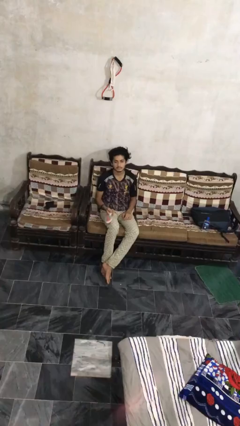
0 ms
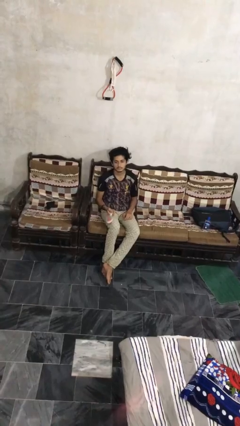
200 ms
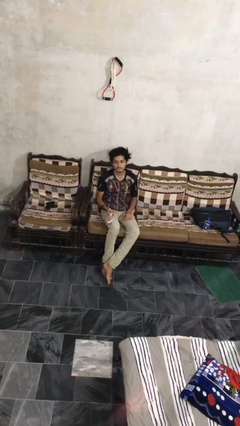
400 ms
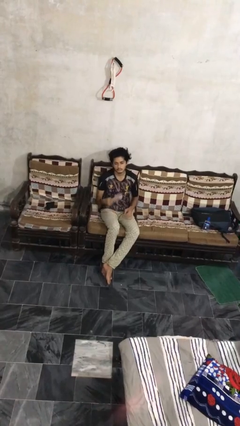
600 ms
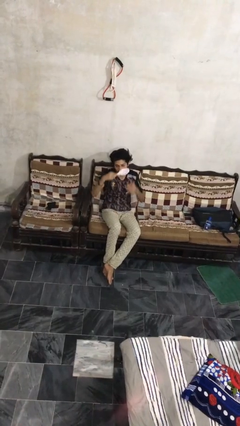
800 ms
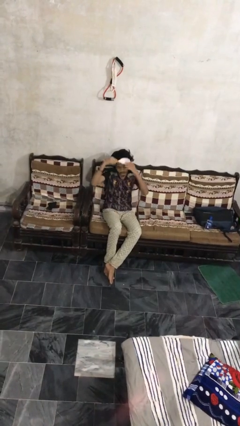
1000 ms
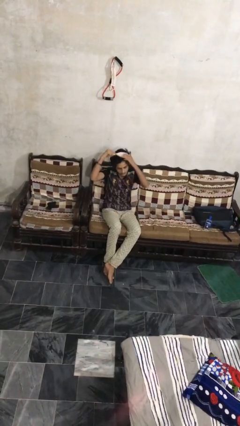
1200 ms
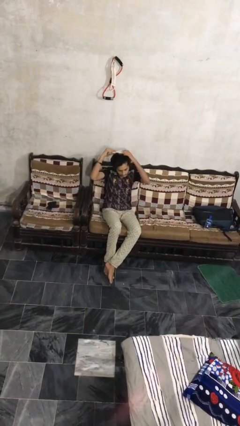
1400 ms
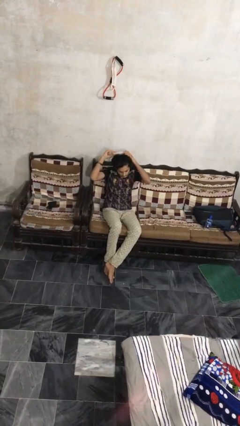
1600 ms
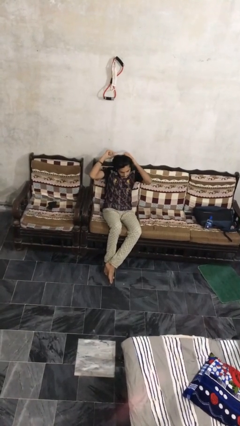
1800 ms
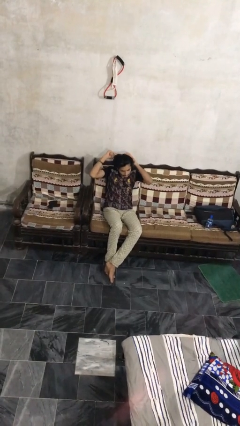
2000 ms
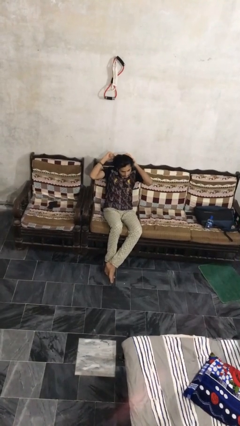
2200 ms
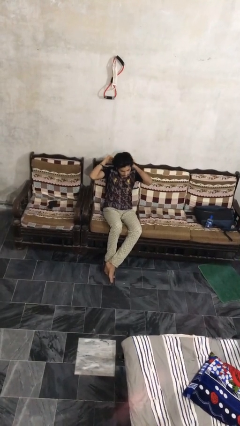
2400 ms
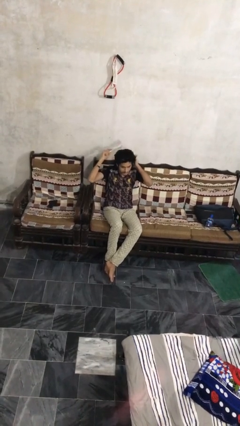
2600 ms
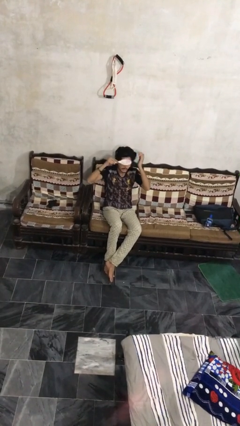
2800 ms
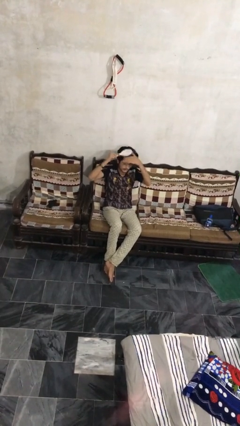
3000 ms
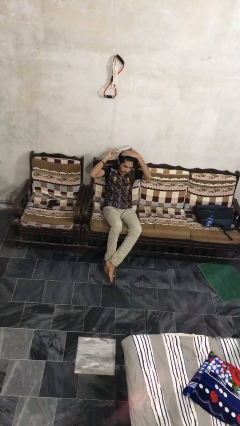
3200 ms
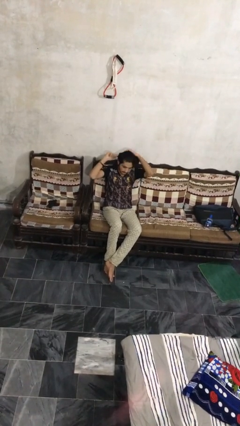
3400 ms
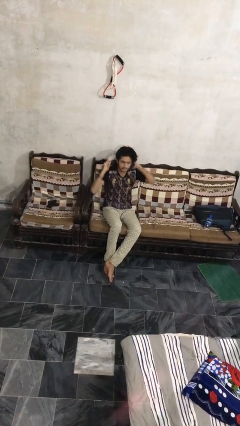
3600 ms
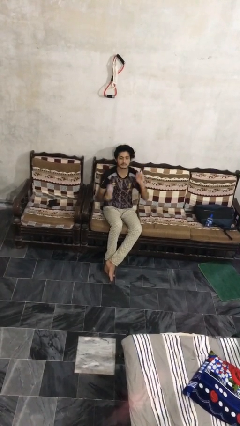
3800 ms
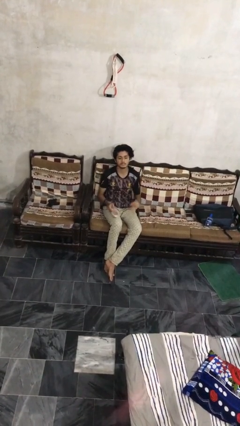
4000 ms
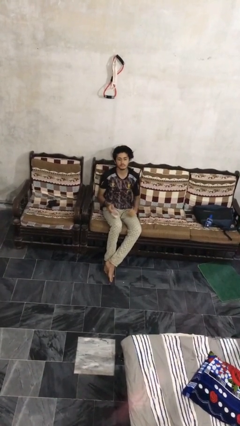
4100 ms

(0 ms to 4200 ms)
person brushes hair

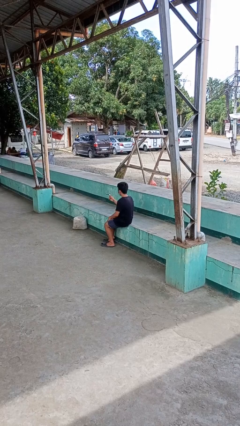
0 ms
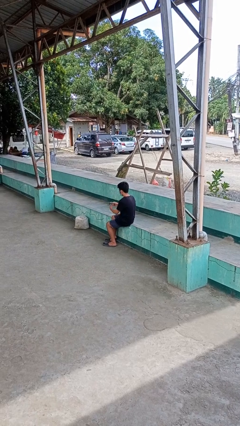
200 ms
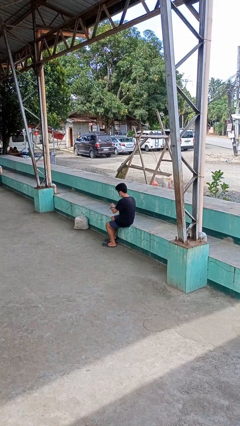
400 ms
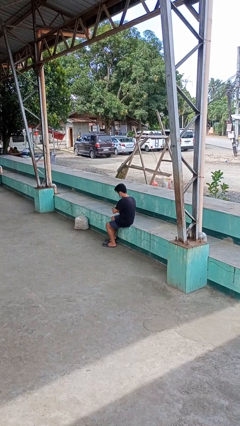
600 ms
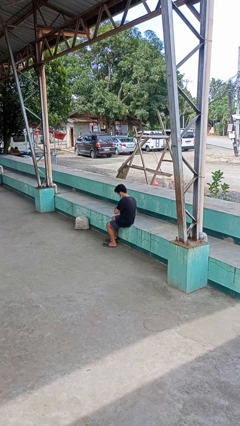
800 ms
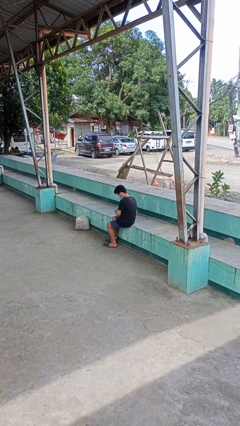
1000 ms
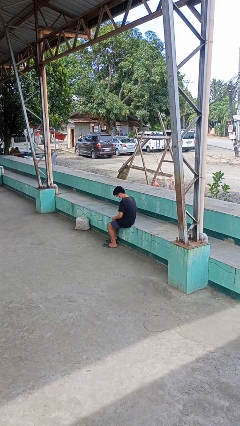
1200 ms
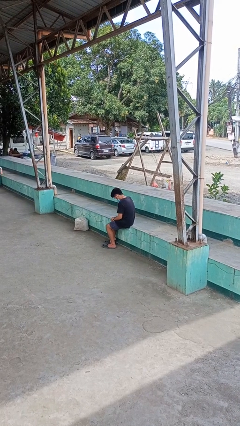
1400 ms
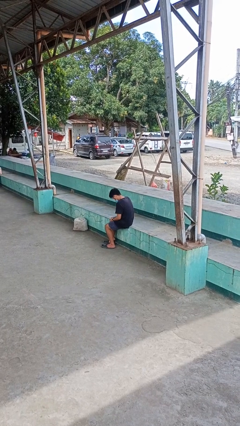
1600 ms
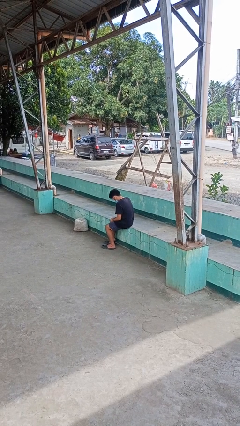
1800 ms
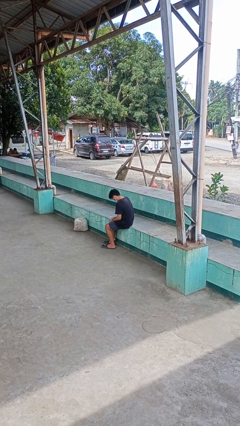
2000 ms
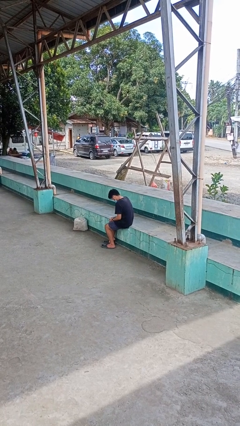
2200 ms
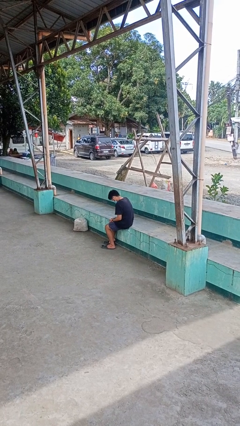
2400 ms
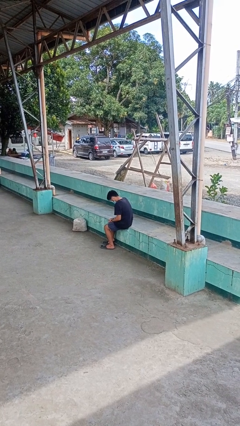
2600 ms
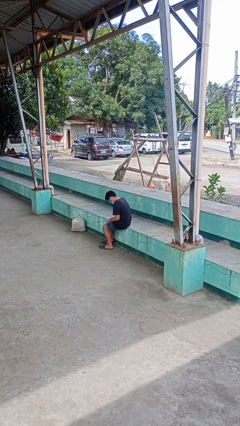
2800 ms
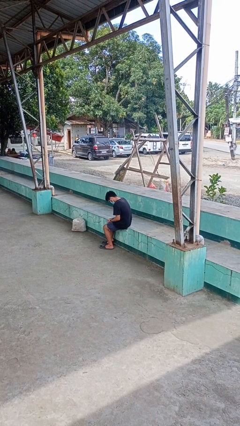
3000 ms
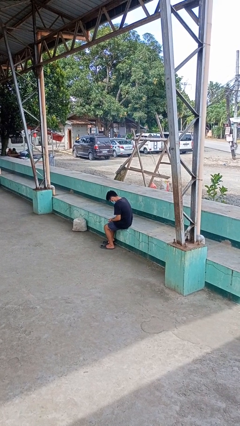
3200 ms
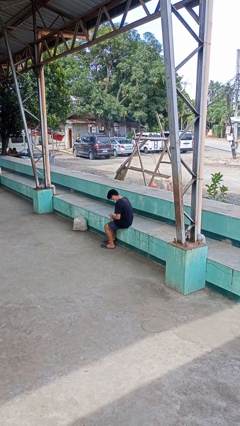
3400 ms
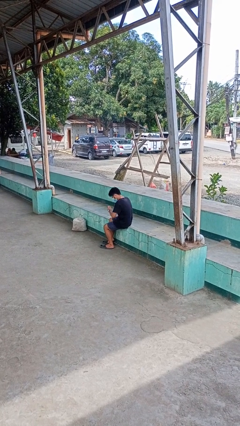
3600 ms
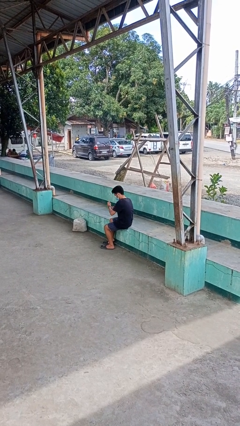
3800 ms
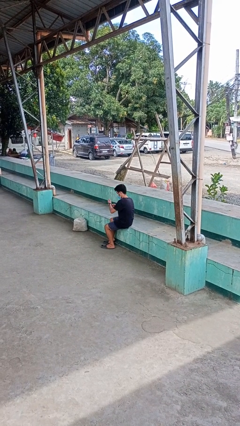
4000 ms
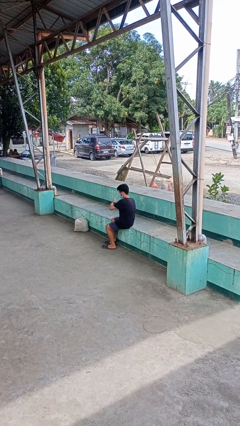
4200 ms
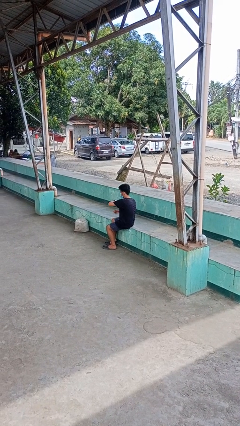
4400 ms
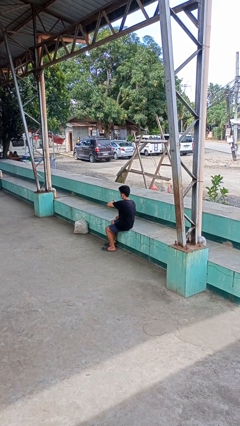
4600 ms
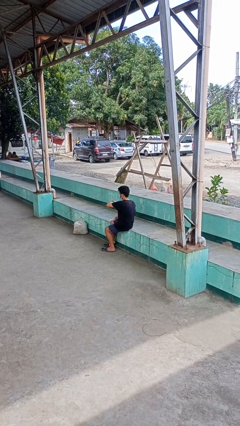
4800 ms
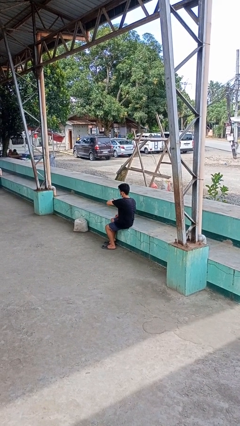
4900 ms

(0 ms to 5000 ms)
person puts on wristwatch

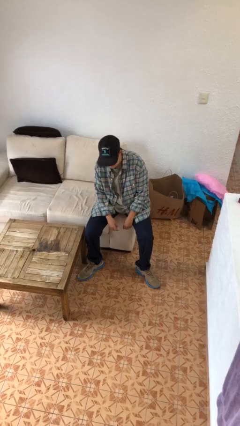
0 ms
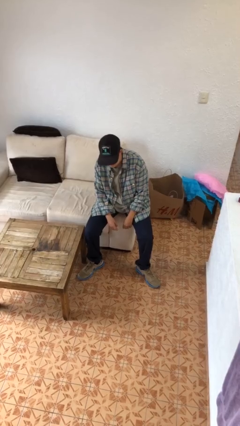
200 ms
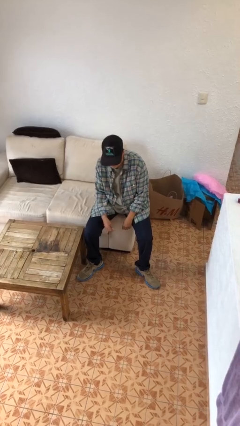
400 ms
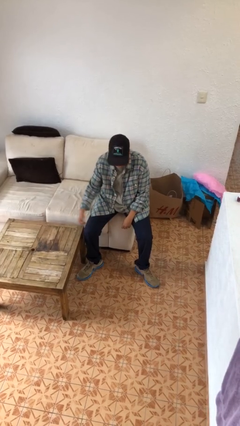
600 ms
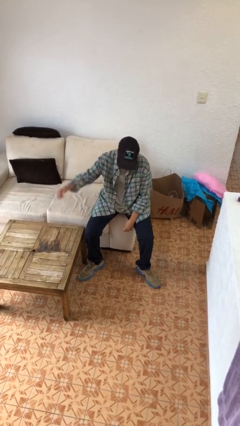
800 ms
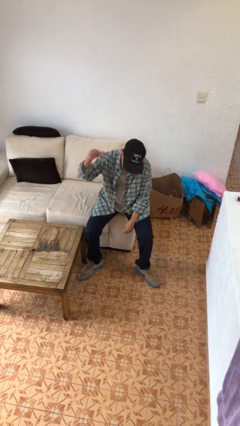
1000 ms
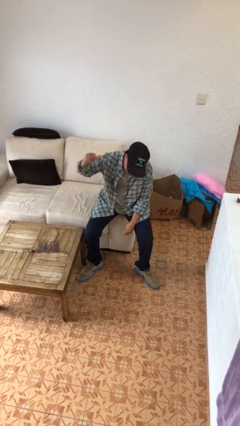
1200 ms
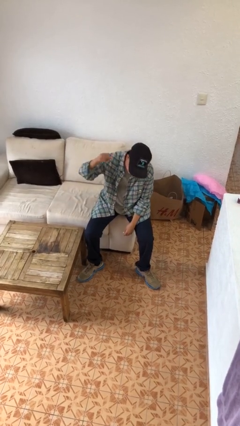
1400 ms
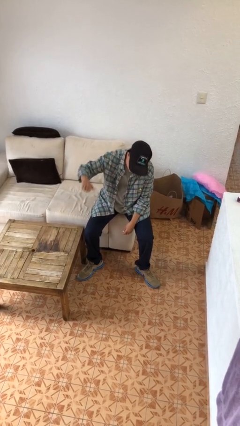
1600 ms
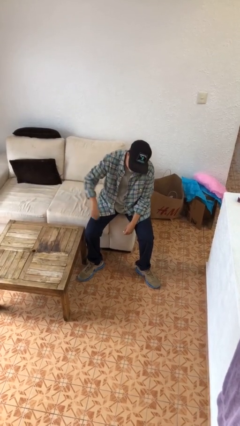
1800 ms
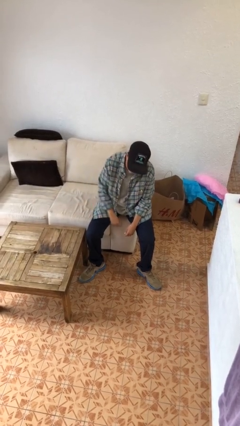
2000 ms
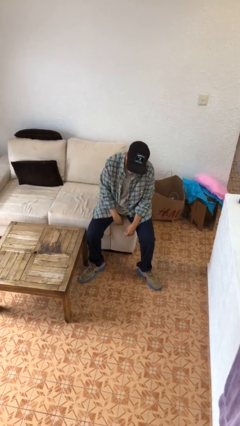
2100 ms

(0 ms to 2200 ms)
person gestures behind me

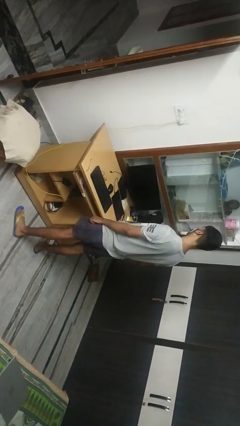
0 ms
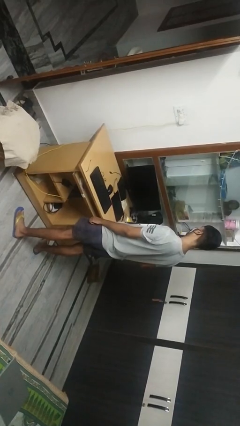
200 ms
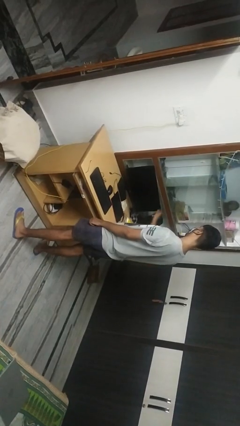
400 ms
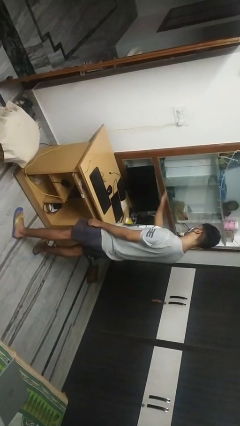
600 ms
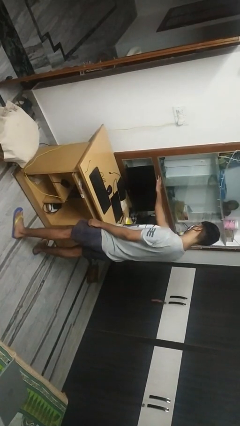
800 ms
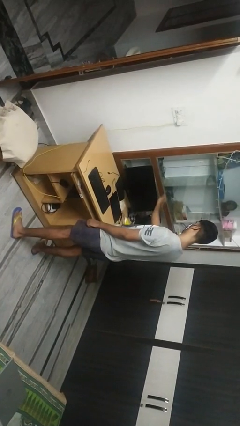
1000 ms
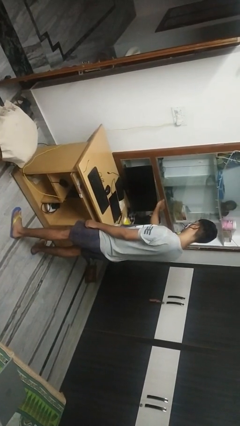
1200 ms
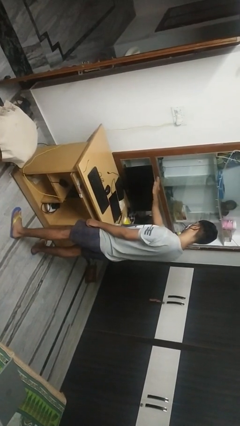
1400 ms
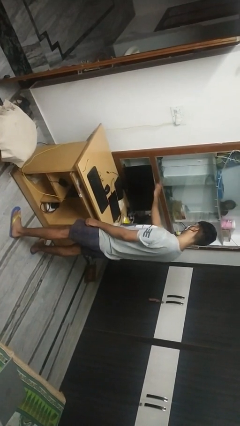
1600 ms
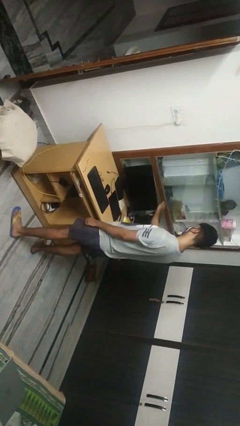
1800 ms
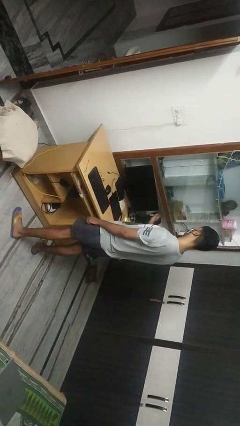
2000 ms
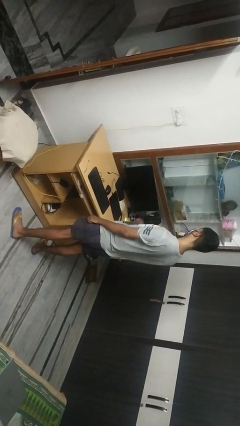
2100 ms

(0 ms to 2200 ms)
person waves hand over object

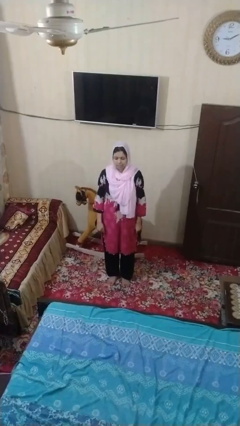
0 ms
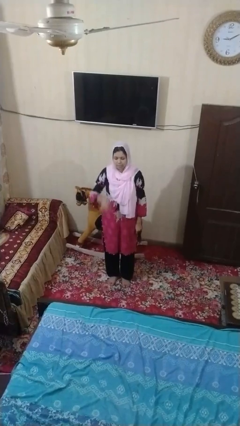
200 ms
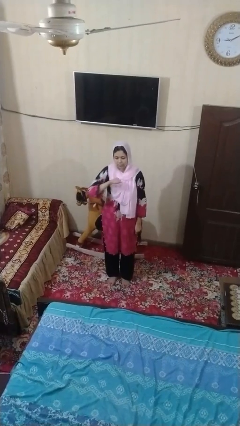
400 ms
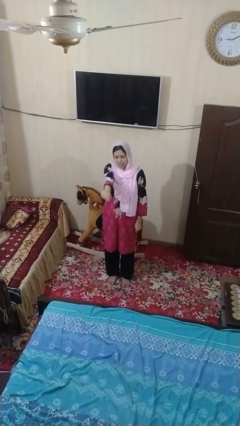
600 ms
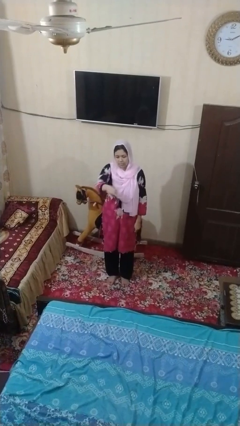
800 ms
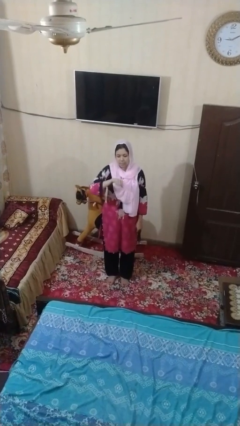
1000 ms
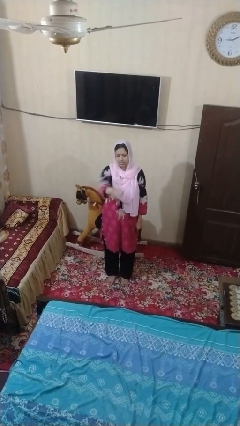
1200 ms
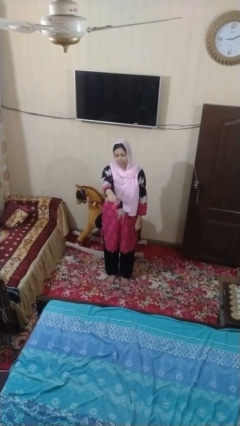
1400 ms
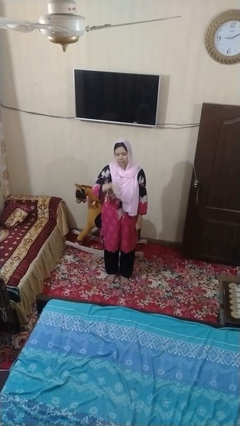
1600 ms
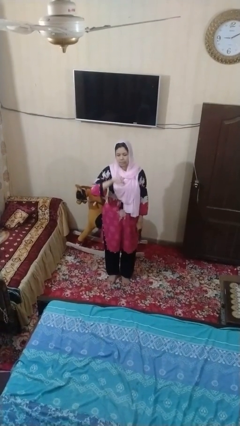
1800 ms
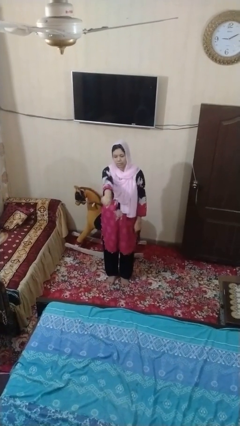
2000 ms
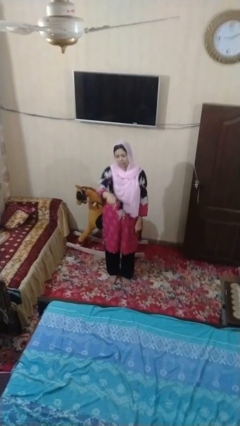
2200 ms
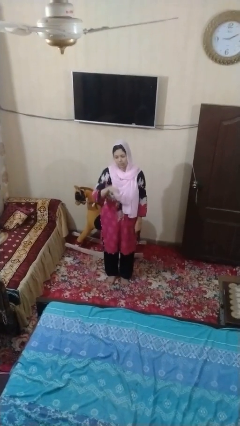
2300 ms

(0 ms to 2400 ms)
person punches

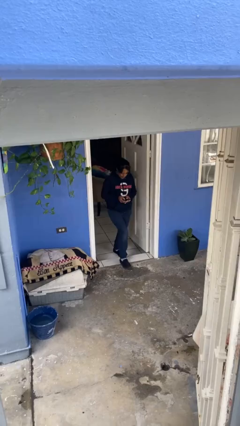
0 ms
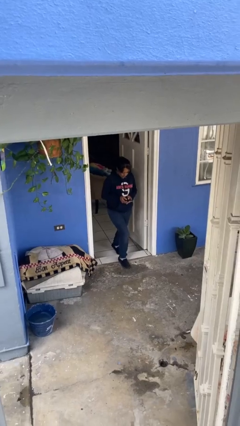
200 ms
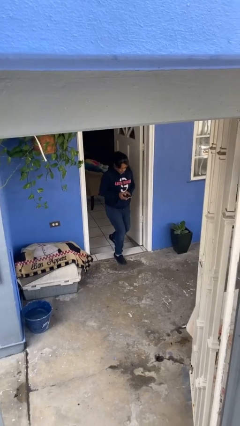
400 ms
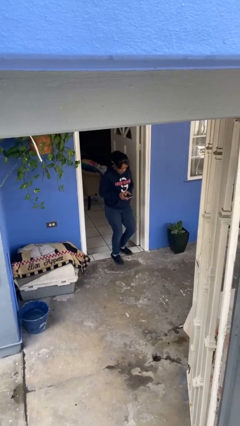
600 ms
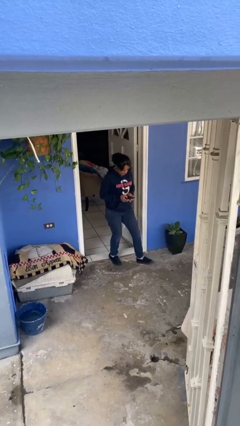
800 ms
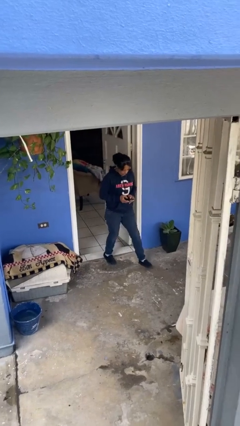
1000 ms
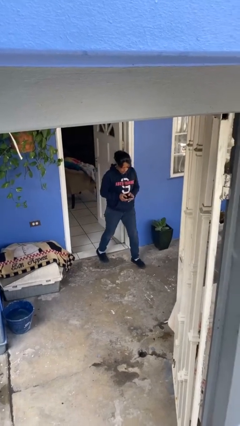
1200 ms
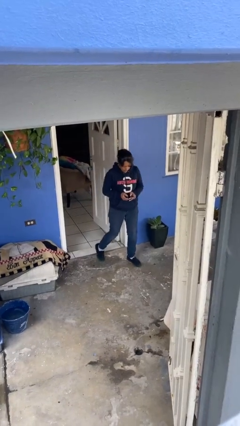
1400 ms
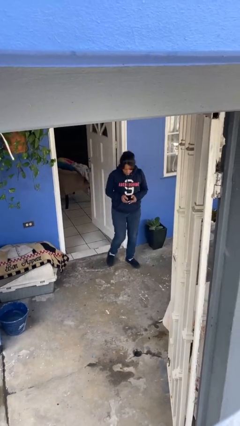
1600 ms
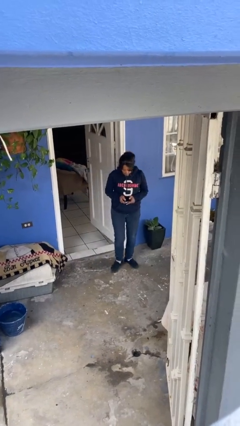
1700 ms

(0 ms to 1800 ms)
person enters scene through structure

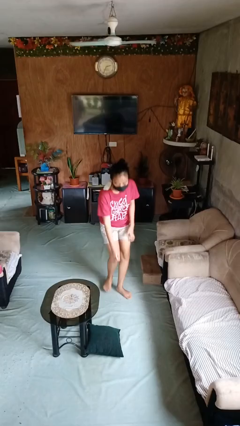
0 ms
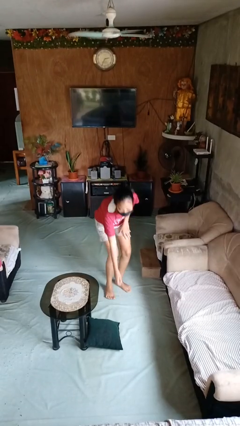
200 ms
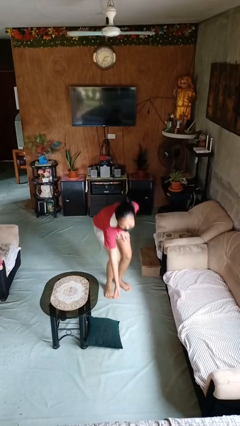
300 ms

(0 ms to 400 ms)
person picks up object from floor
